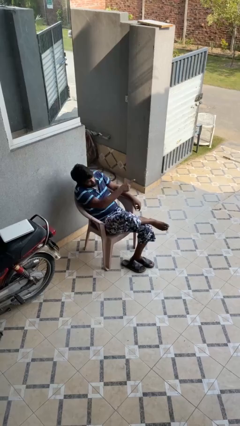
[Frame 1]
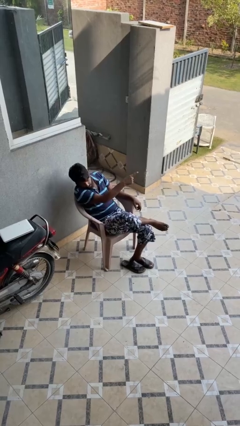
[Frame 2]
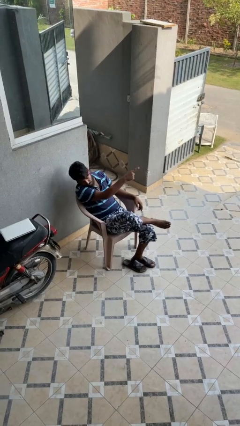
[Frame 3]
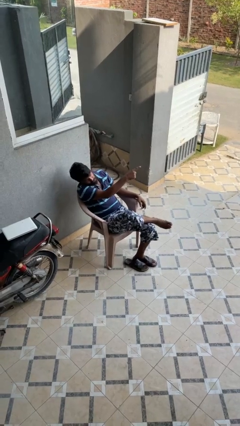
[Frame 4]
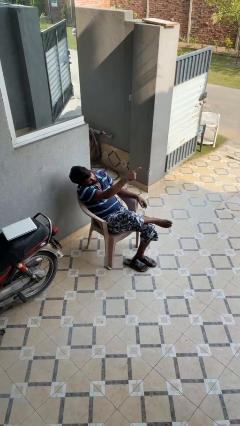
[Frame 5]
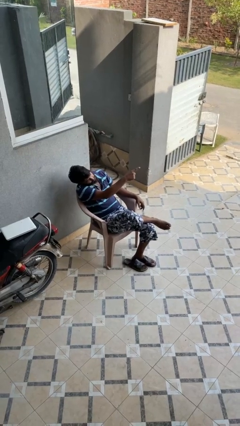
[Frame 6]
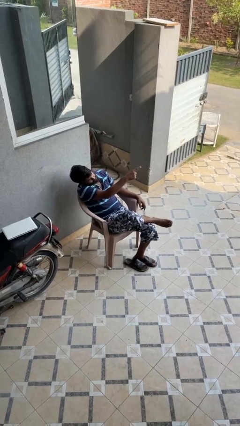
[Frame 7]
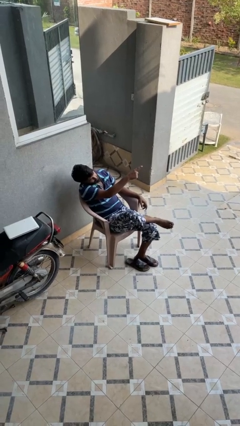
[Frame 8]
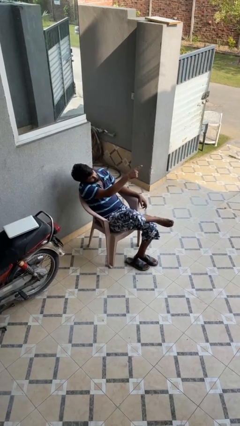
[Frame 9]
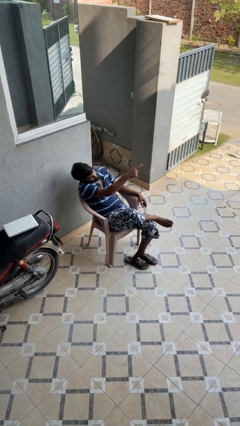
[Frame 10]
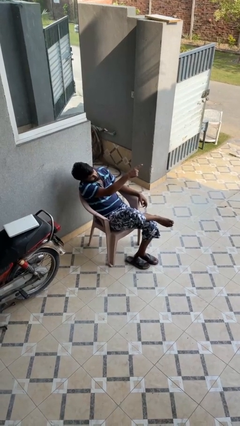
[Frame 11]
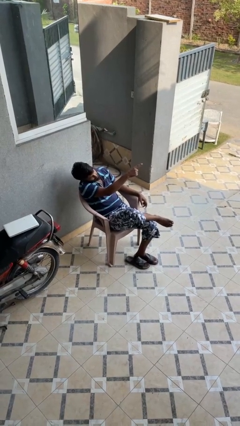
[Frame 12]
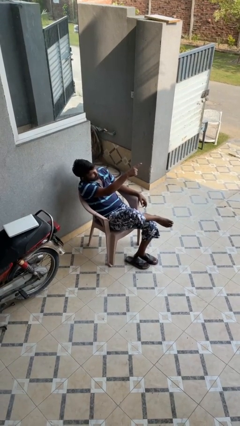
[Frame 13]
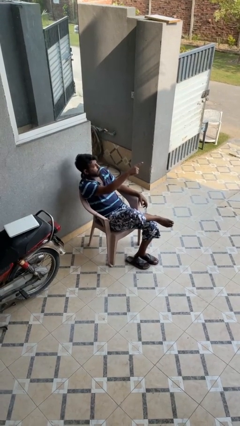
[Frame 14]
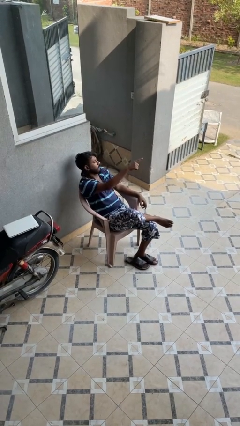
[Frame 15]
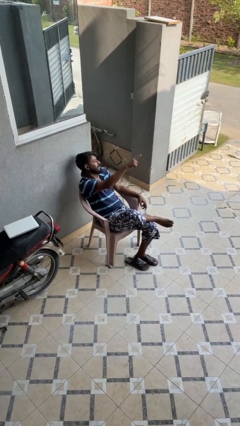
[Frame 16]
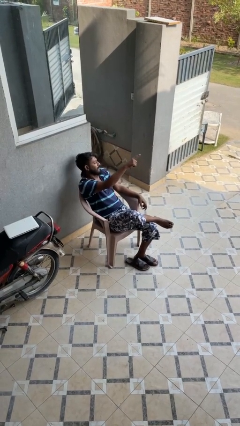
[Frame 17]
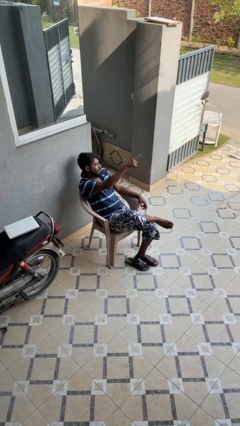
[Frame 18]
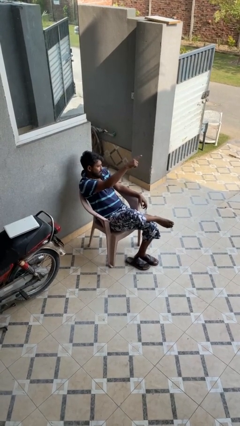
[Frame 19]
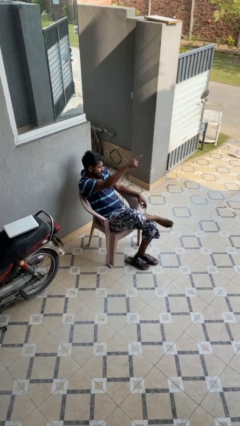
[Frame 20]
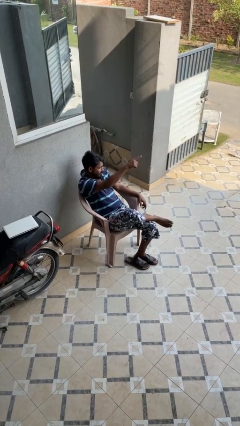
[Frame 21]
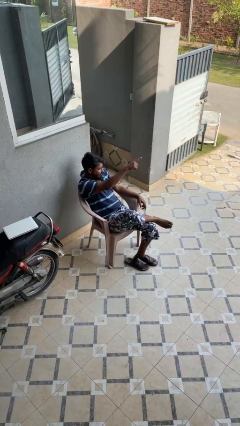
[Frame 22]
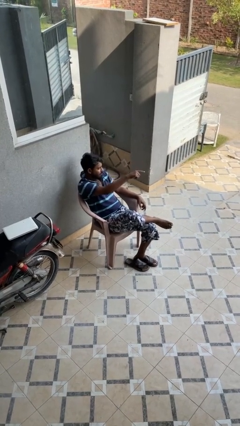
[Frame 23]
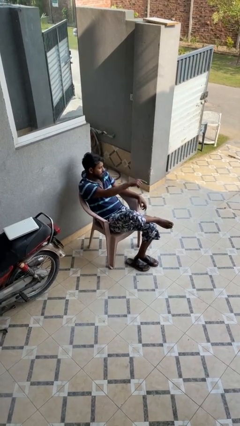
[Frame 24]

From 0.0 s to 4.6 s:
person points at person

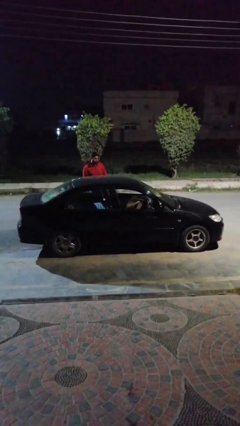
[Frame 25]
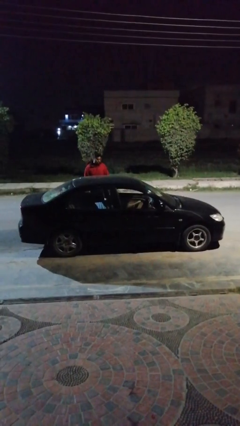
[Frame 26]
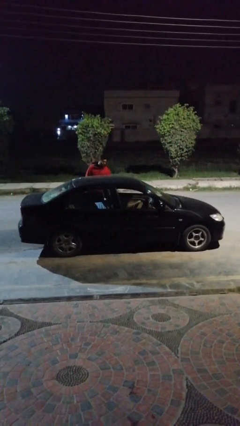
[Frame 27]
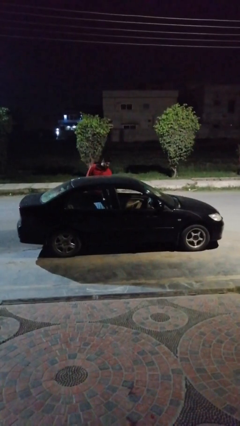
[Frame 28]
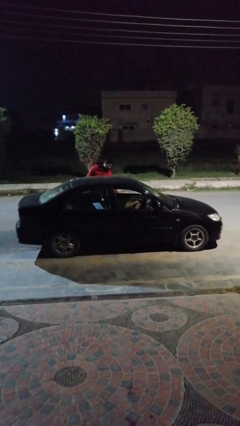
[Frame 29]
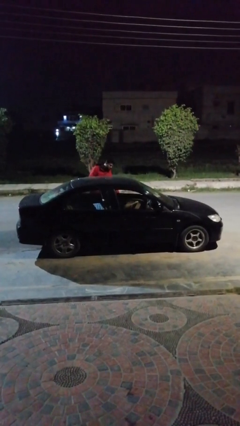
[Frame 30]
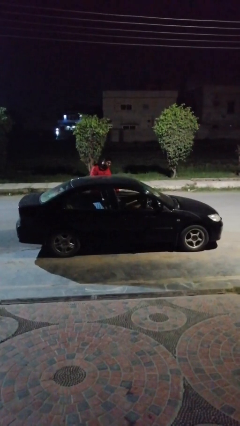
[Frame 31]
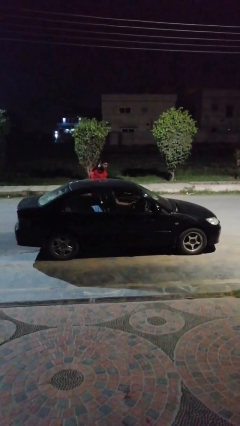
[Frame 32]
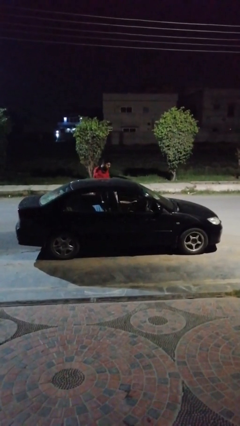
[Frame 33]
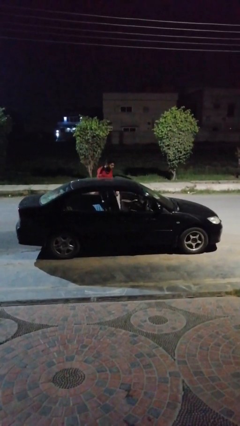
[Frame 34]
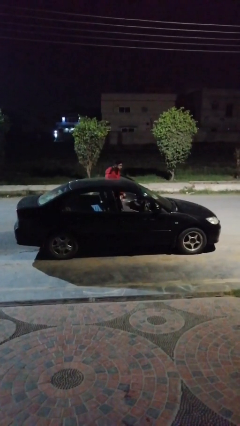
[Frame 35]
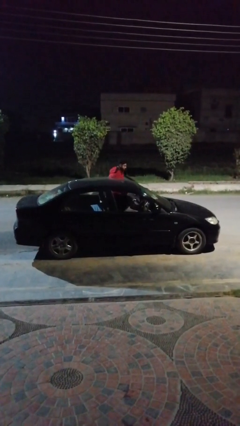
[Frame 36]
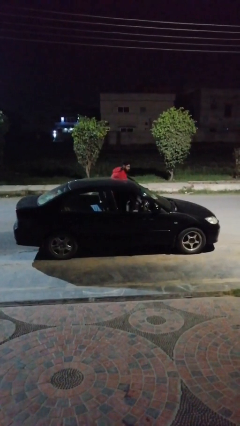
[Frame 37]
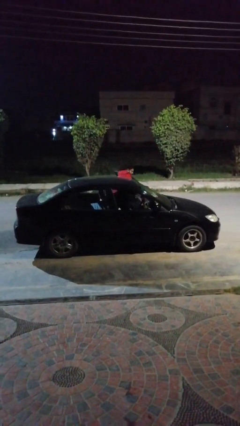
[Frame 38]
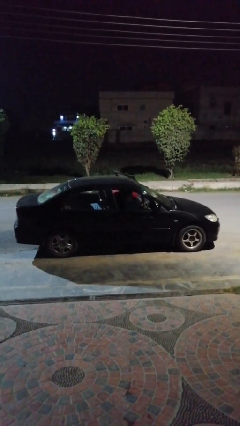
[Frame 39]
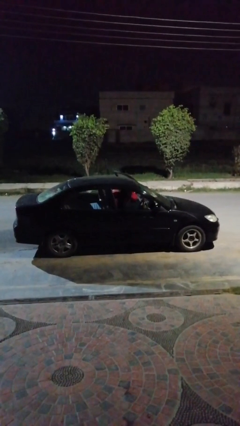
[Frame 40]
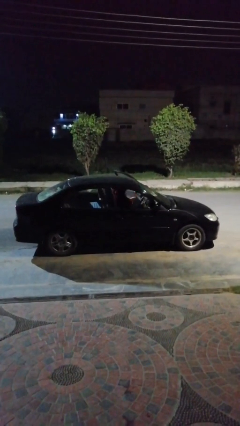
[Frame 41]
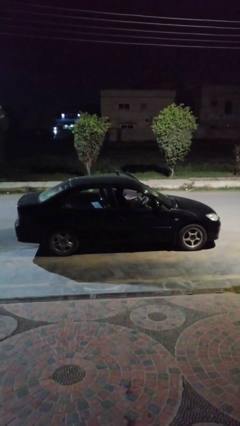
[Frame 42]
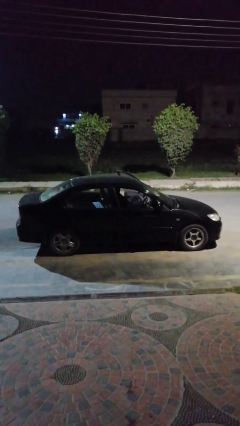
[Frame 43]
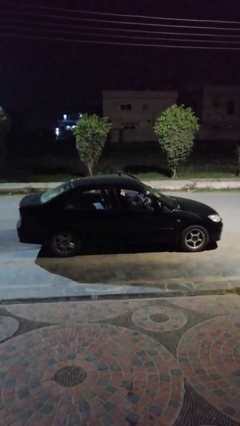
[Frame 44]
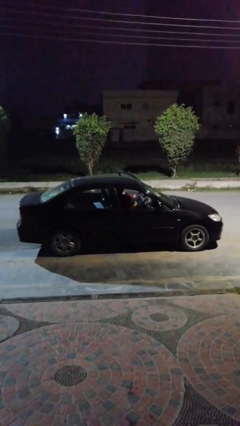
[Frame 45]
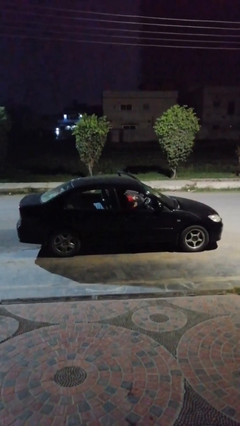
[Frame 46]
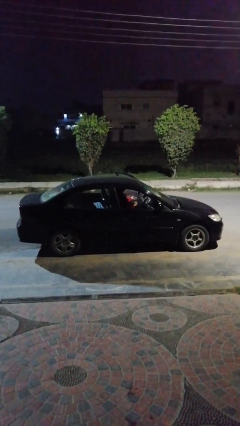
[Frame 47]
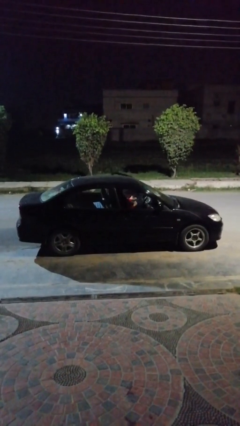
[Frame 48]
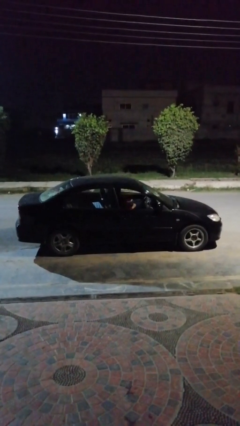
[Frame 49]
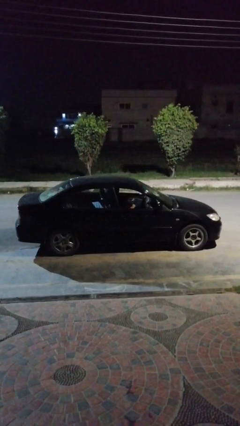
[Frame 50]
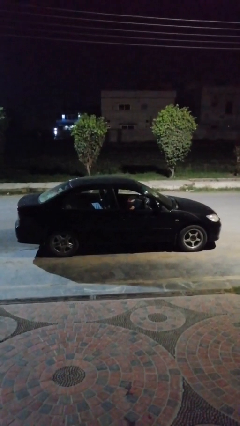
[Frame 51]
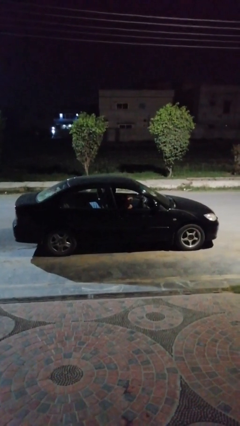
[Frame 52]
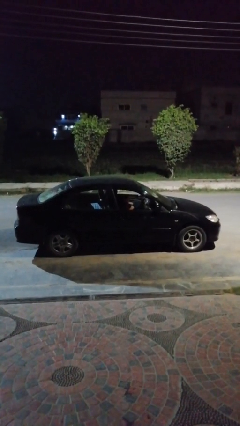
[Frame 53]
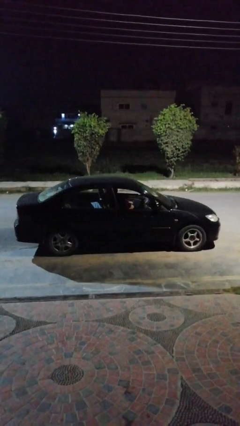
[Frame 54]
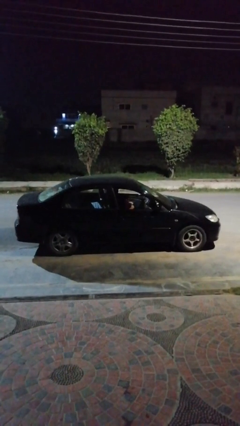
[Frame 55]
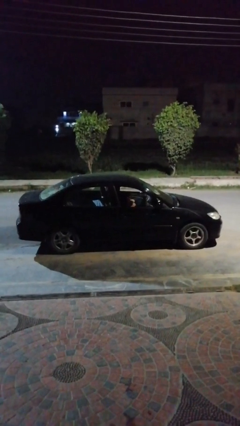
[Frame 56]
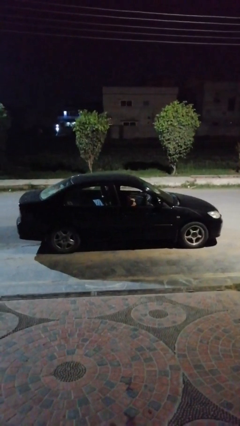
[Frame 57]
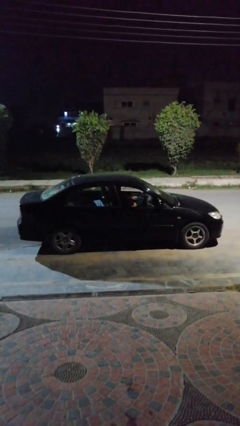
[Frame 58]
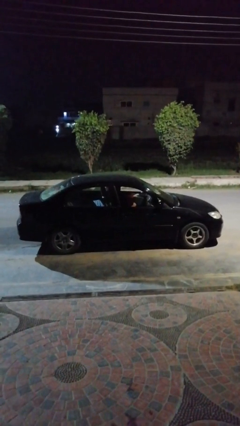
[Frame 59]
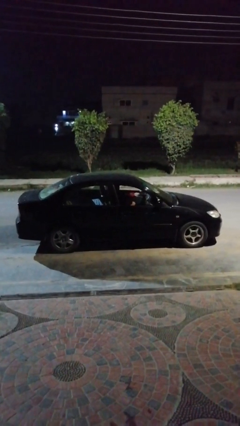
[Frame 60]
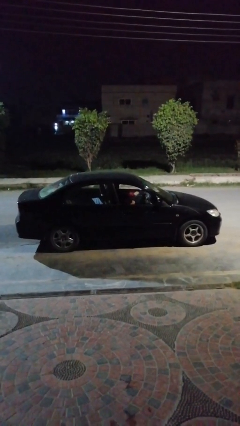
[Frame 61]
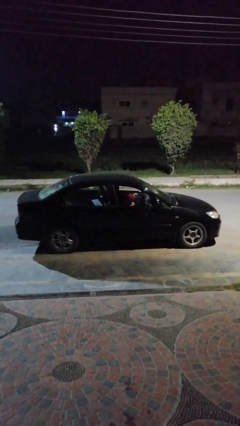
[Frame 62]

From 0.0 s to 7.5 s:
car picks up person

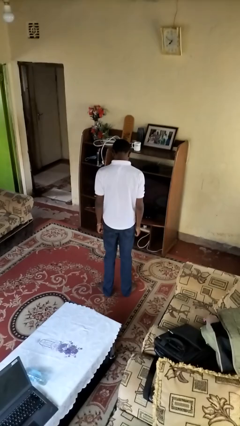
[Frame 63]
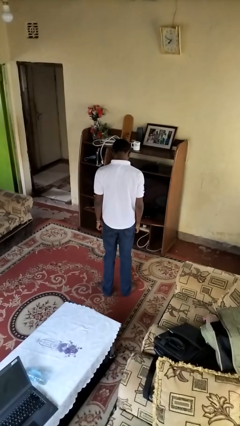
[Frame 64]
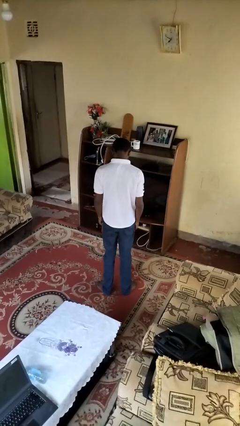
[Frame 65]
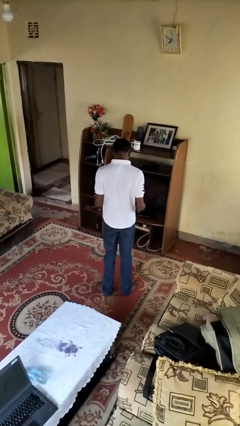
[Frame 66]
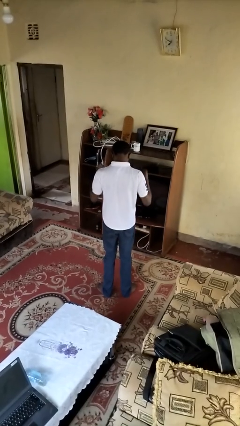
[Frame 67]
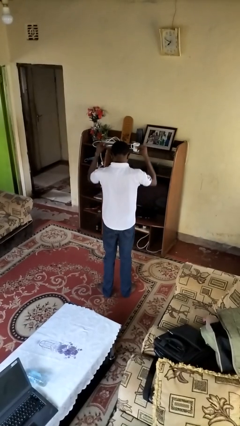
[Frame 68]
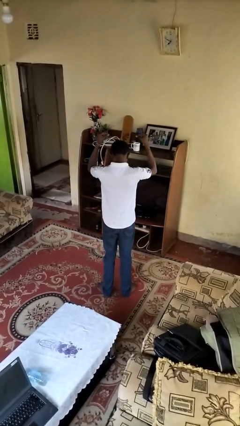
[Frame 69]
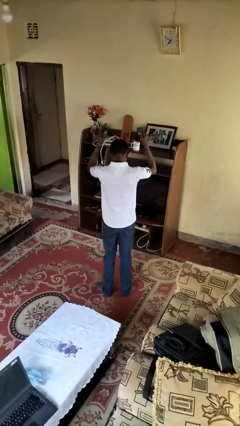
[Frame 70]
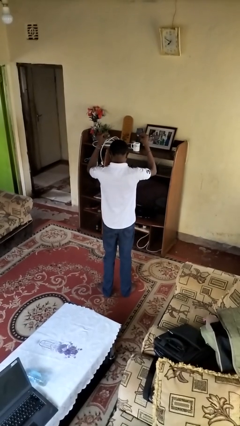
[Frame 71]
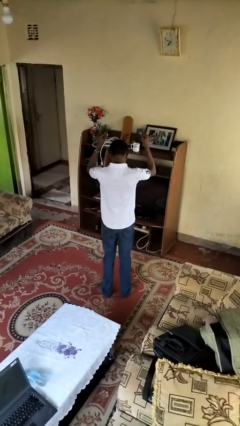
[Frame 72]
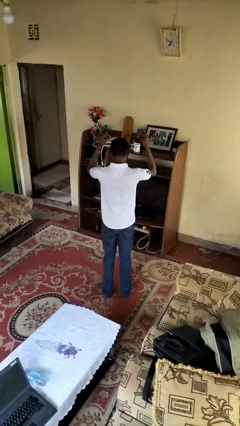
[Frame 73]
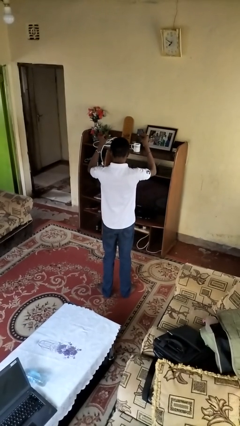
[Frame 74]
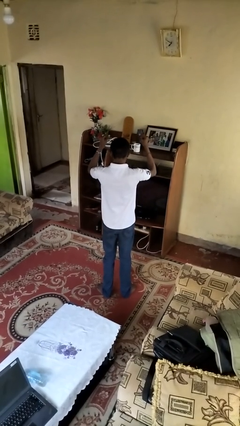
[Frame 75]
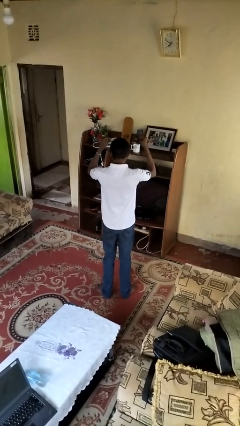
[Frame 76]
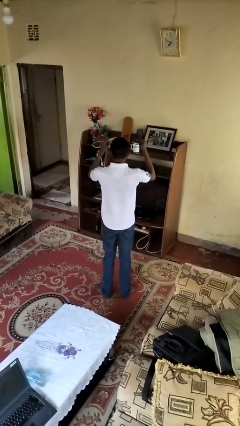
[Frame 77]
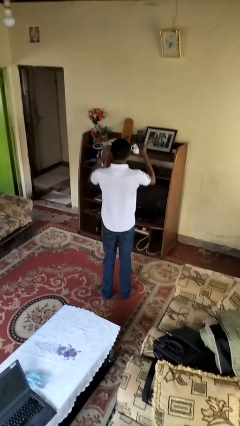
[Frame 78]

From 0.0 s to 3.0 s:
person snaps fingers

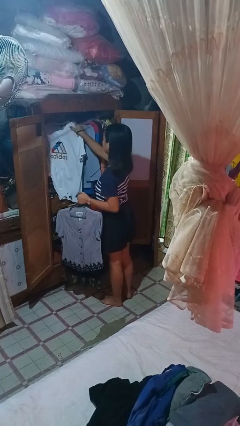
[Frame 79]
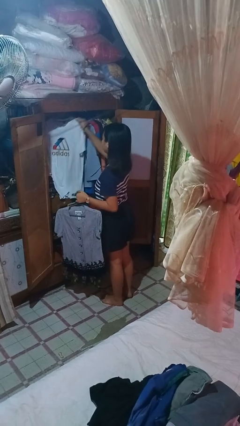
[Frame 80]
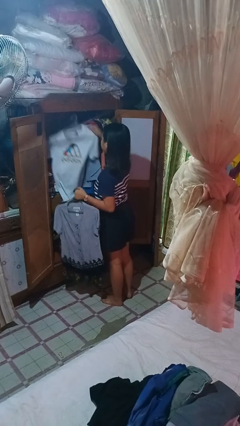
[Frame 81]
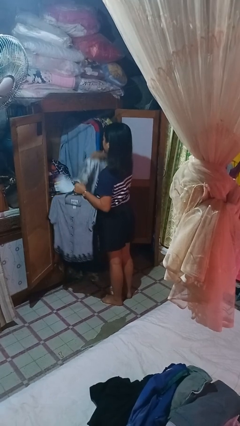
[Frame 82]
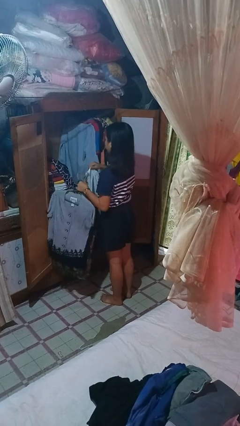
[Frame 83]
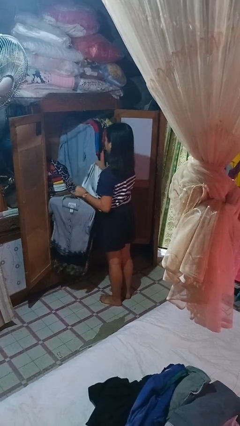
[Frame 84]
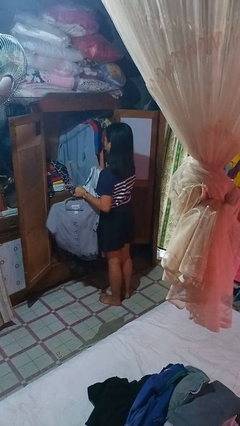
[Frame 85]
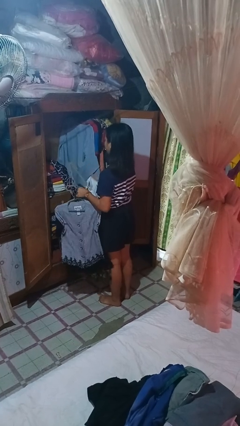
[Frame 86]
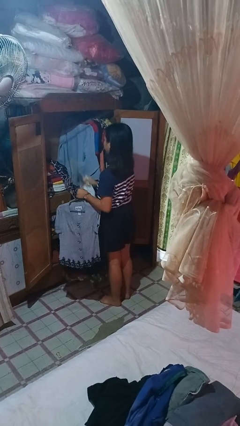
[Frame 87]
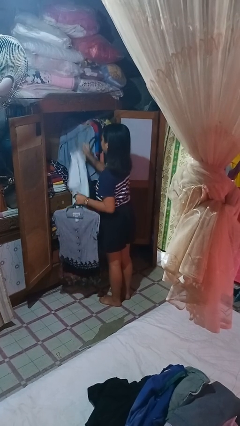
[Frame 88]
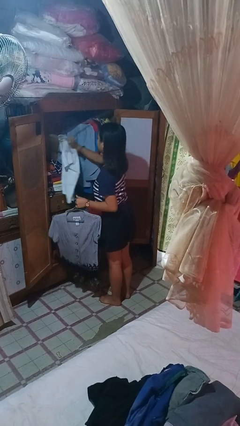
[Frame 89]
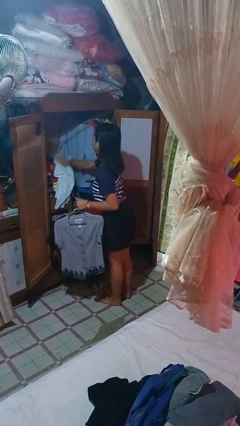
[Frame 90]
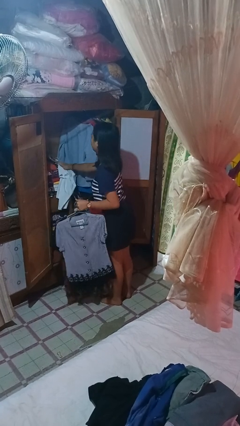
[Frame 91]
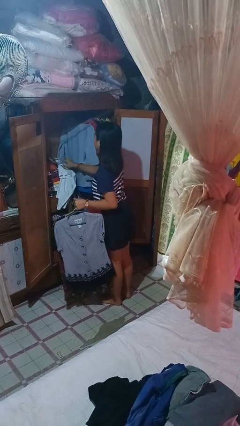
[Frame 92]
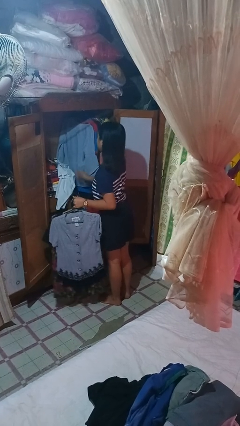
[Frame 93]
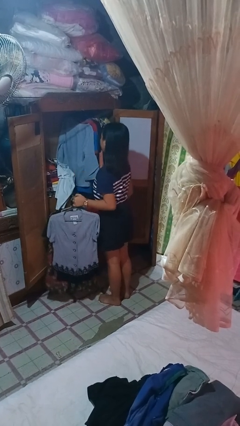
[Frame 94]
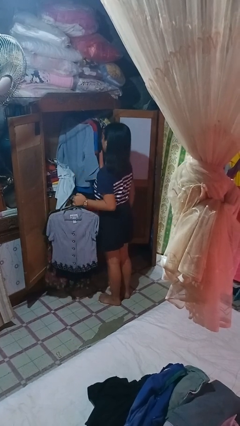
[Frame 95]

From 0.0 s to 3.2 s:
person takes clothes from closet
